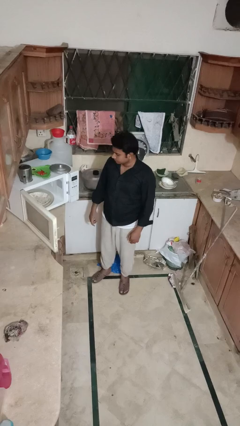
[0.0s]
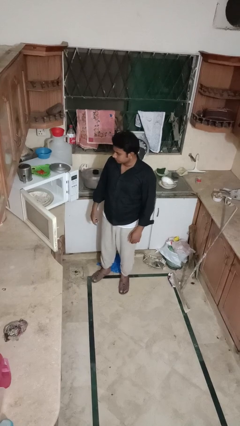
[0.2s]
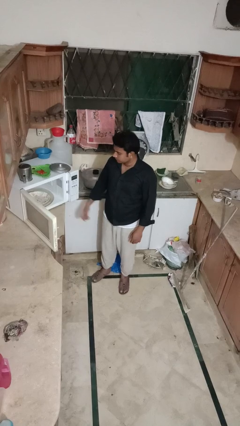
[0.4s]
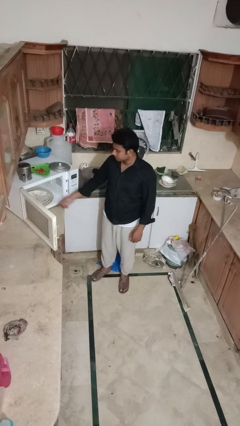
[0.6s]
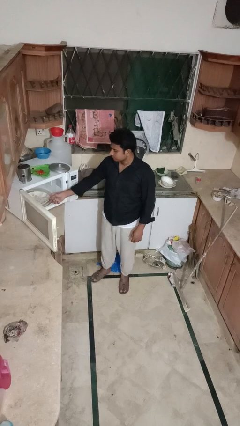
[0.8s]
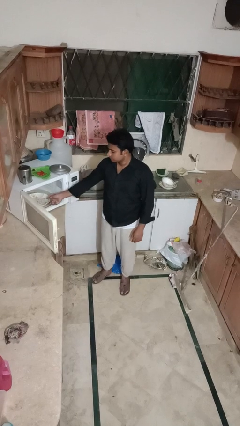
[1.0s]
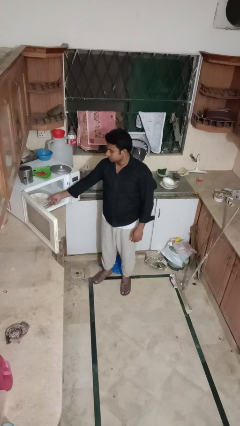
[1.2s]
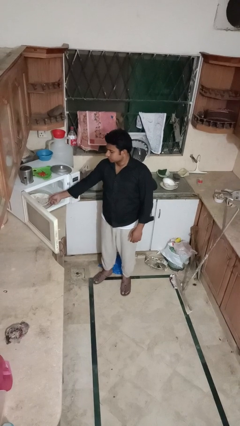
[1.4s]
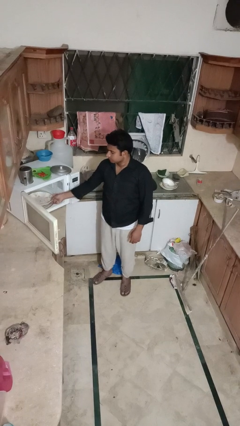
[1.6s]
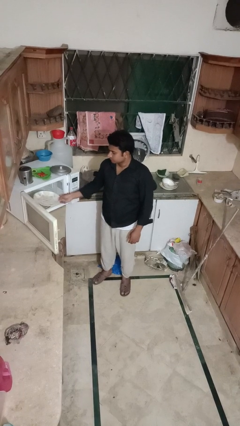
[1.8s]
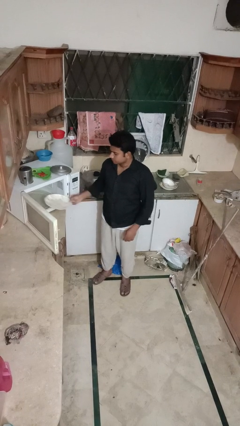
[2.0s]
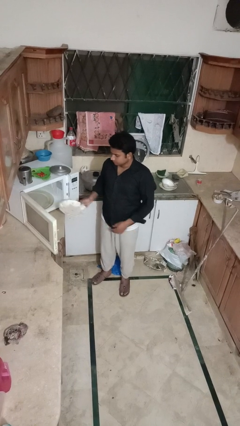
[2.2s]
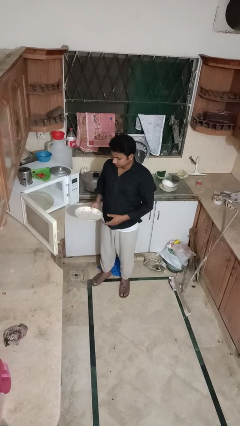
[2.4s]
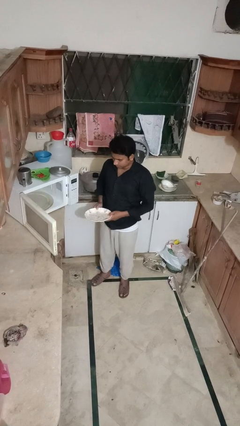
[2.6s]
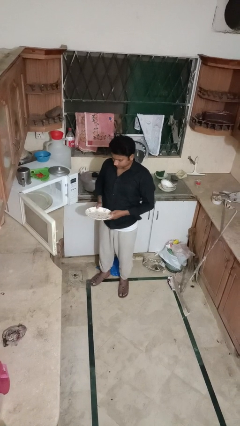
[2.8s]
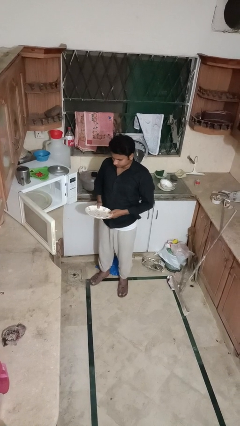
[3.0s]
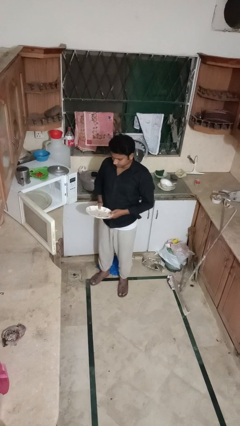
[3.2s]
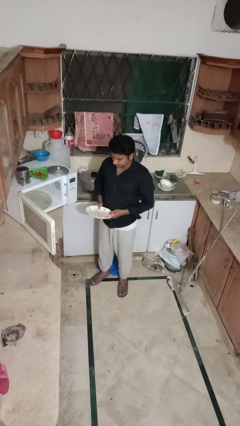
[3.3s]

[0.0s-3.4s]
person takes object from microwave

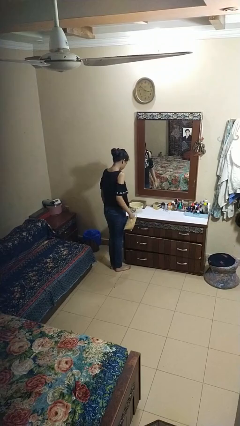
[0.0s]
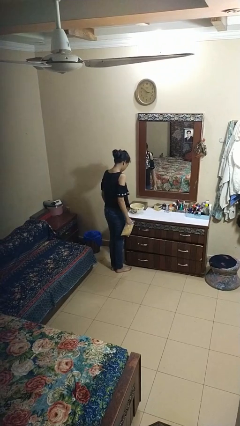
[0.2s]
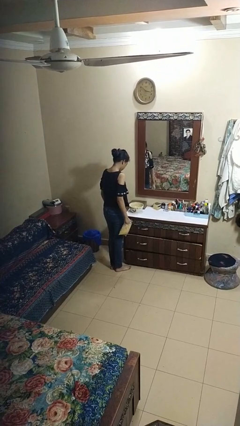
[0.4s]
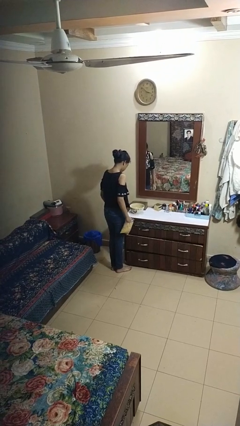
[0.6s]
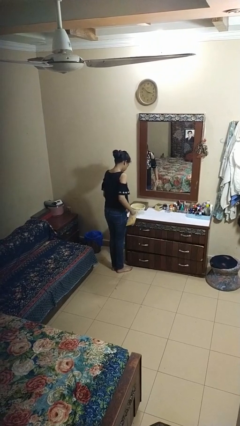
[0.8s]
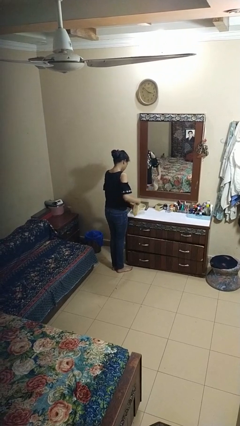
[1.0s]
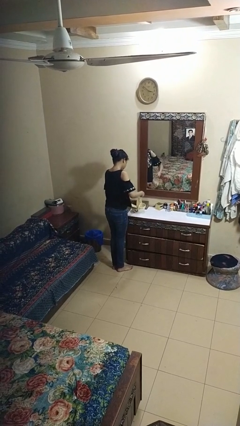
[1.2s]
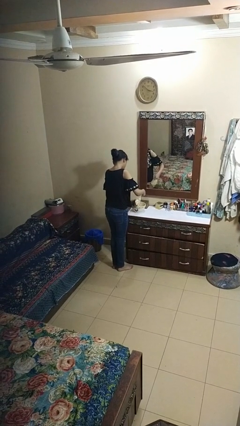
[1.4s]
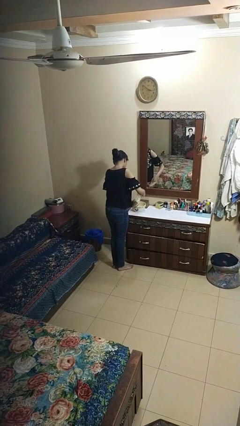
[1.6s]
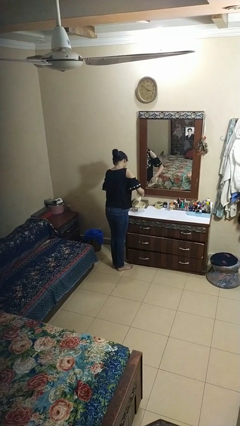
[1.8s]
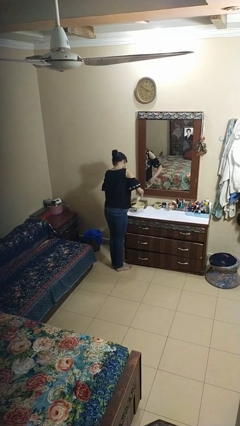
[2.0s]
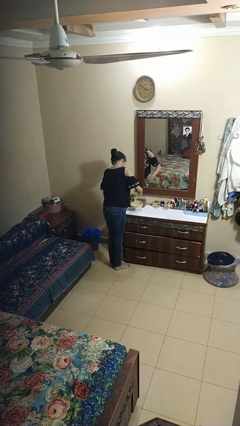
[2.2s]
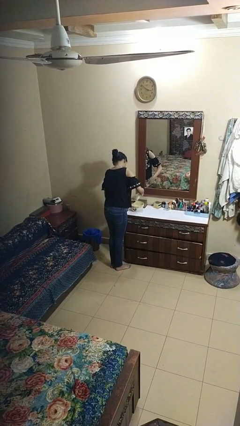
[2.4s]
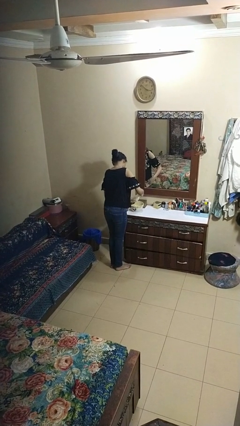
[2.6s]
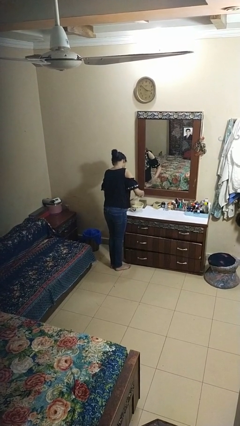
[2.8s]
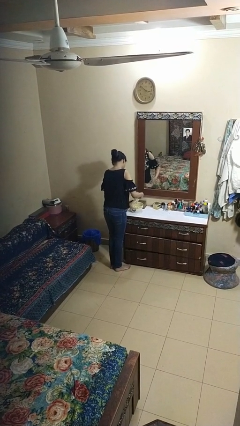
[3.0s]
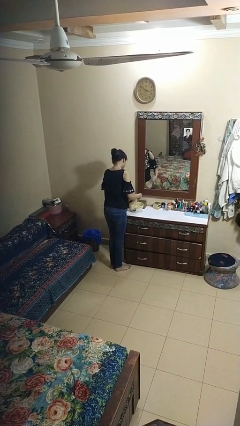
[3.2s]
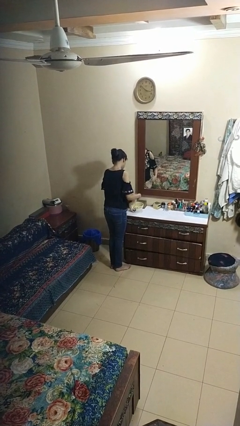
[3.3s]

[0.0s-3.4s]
person pours into bowl

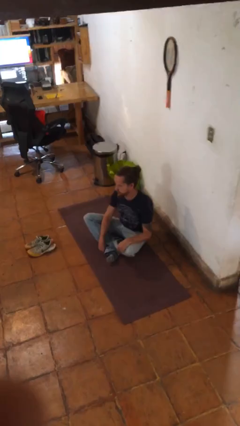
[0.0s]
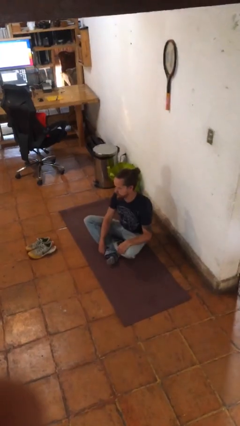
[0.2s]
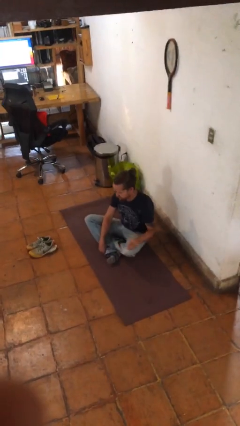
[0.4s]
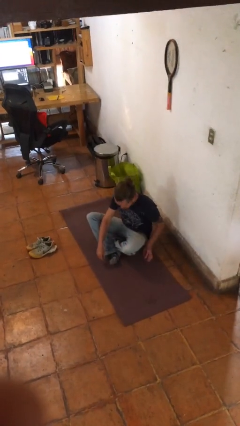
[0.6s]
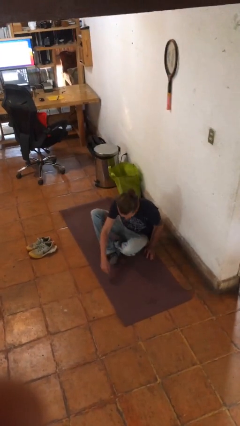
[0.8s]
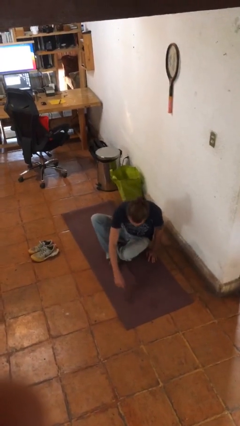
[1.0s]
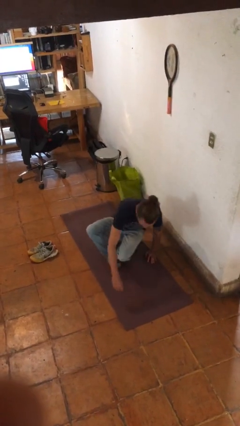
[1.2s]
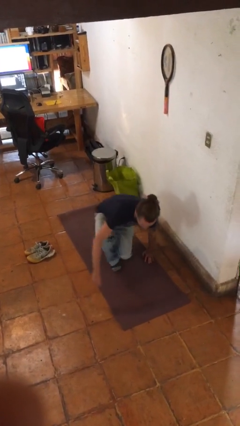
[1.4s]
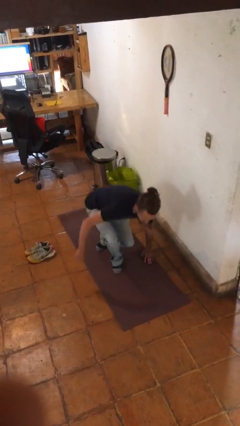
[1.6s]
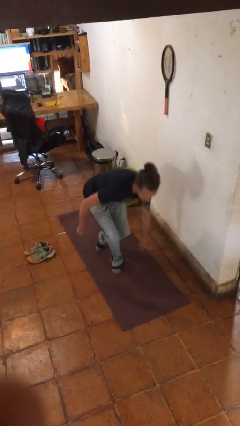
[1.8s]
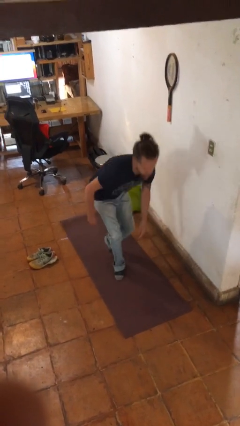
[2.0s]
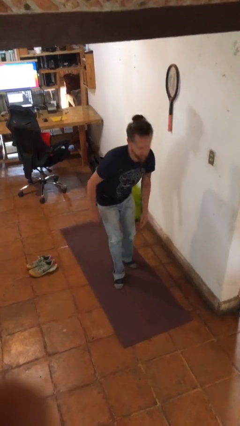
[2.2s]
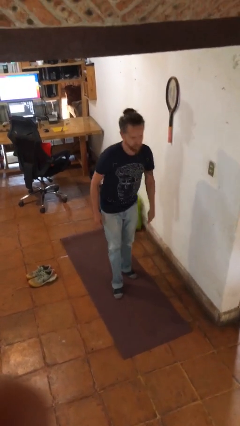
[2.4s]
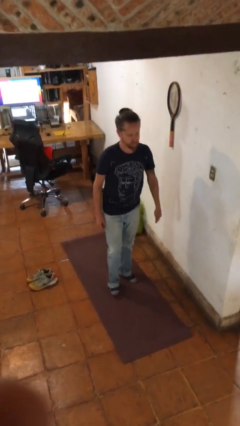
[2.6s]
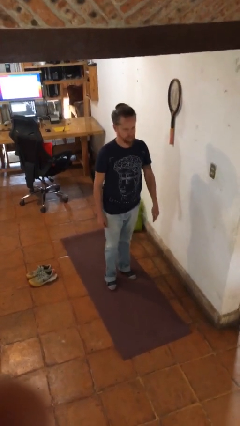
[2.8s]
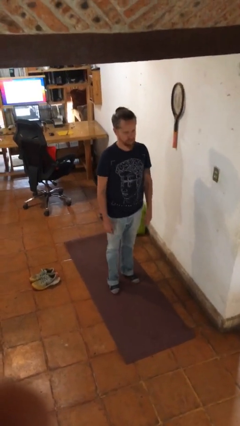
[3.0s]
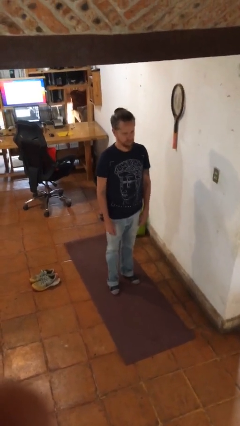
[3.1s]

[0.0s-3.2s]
person stands up from floor

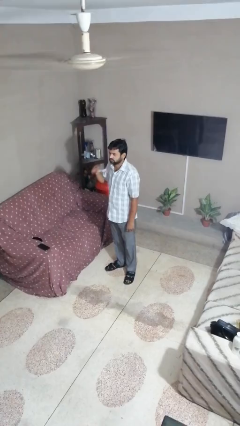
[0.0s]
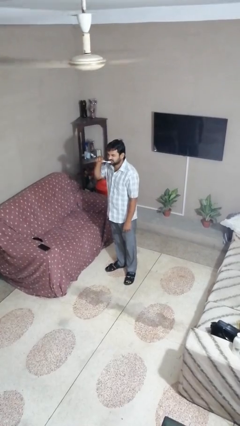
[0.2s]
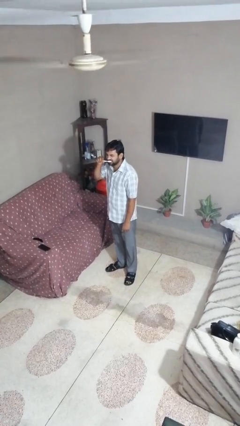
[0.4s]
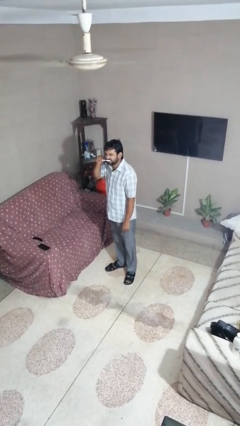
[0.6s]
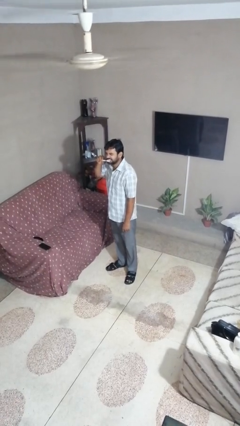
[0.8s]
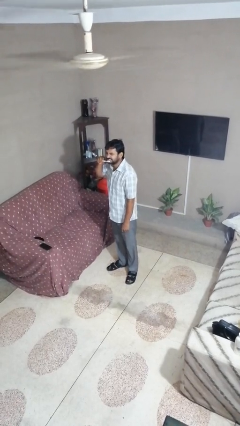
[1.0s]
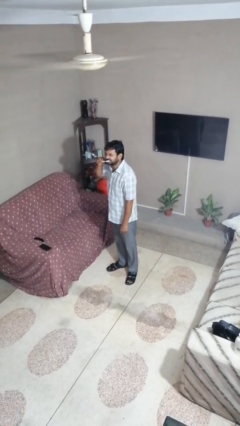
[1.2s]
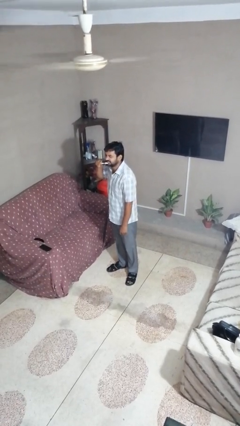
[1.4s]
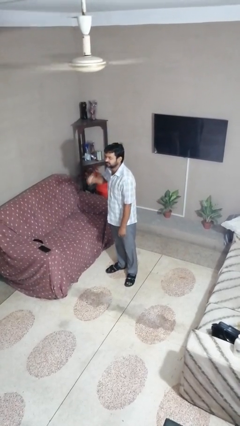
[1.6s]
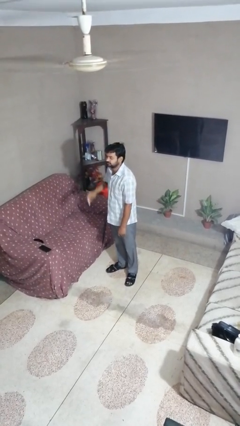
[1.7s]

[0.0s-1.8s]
person brushes teeth

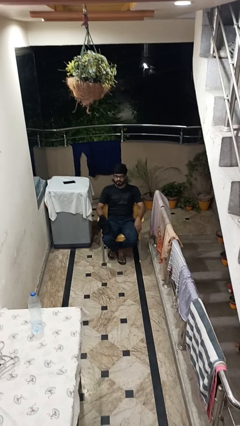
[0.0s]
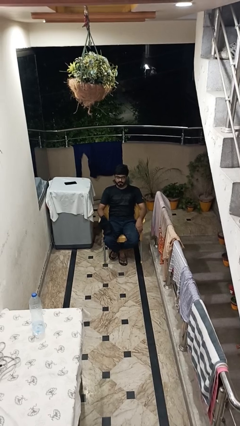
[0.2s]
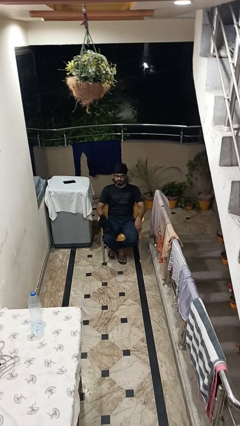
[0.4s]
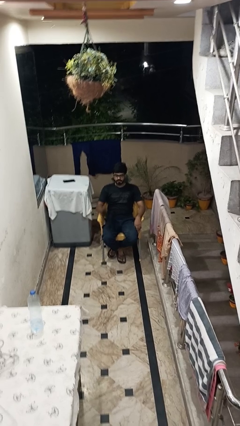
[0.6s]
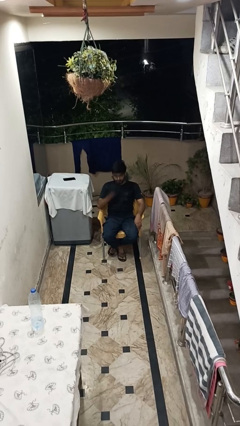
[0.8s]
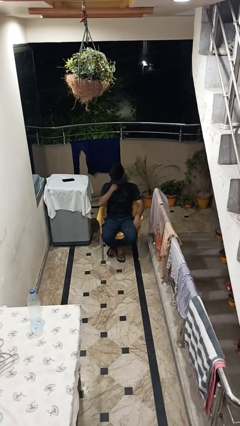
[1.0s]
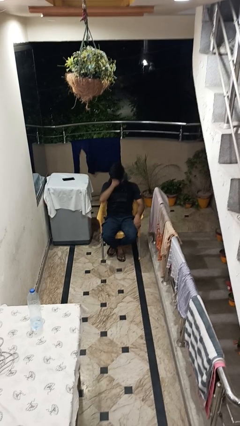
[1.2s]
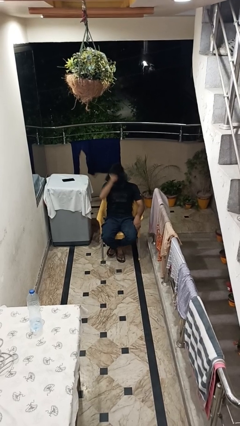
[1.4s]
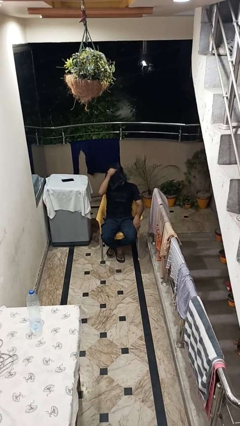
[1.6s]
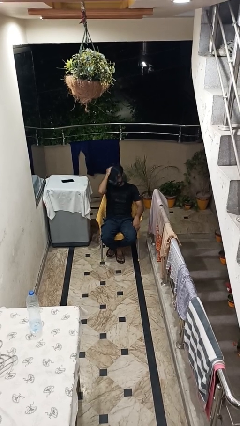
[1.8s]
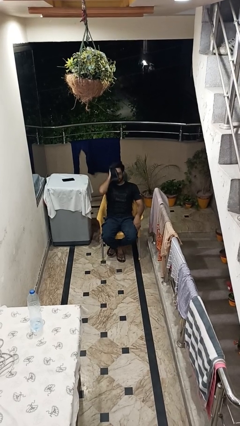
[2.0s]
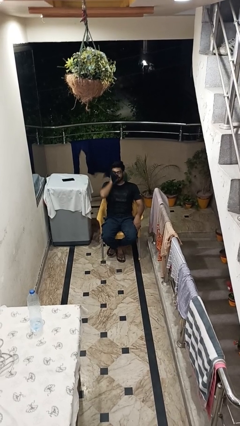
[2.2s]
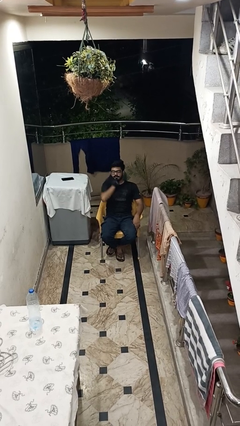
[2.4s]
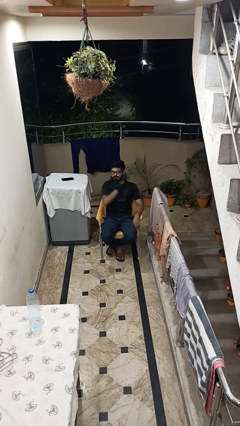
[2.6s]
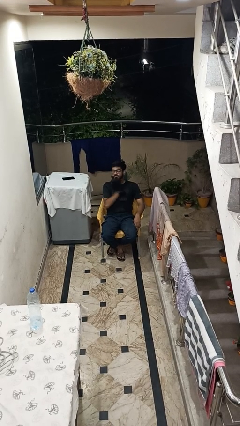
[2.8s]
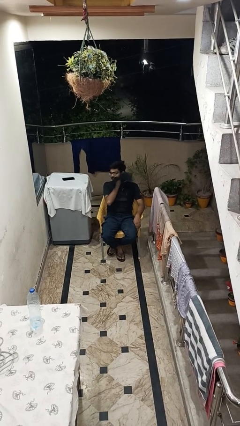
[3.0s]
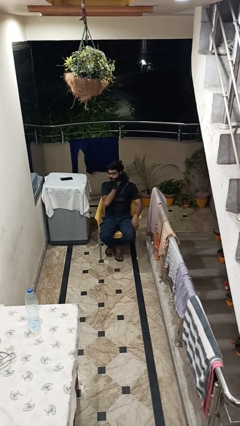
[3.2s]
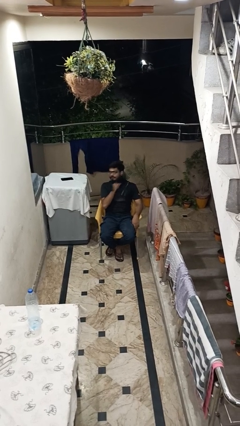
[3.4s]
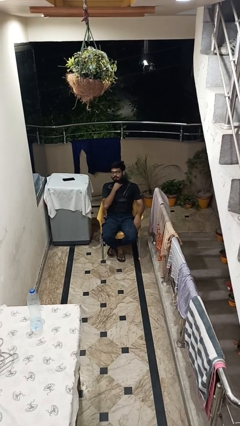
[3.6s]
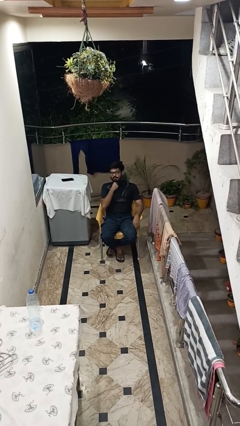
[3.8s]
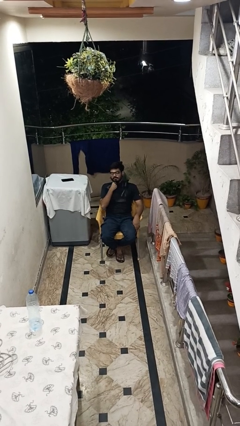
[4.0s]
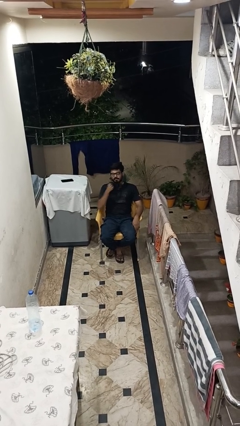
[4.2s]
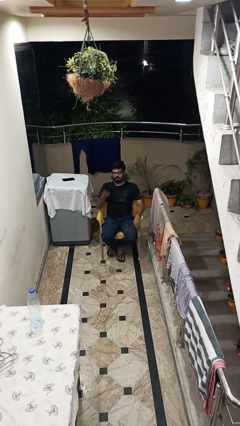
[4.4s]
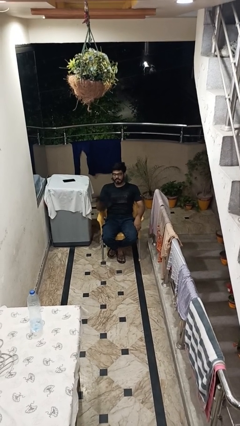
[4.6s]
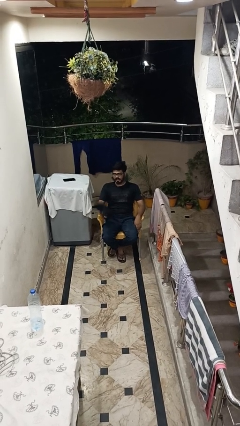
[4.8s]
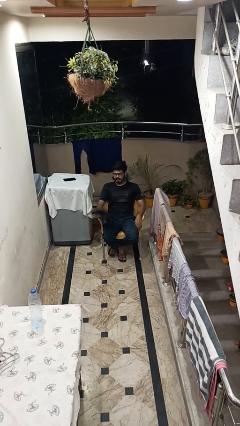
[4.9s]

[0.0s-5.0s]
person wipes mouth with napkin

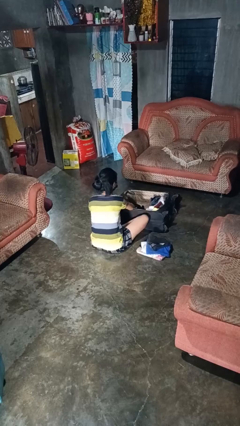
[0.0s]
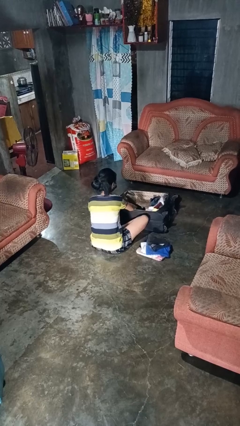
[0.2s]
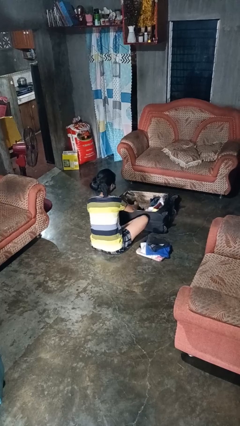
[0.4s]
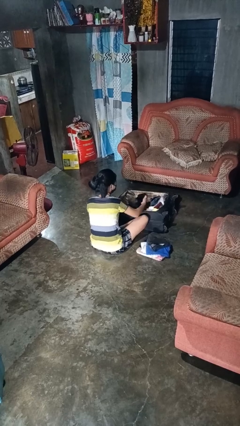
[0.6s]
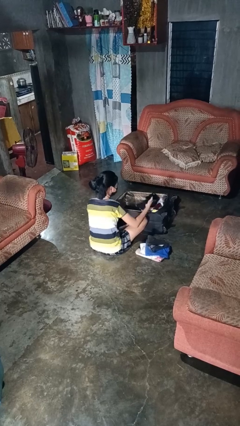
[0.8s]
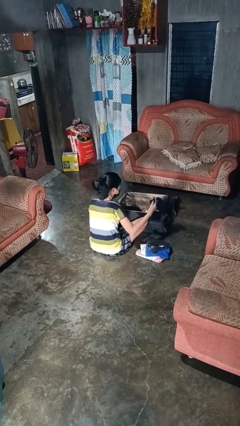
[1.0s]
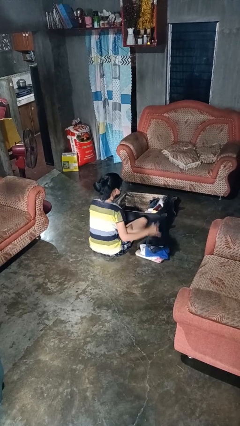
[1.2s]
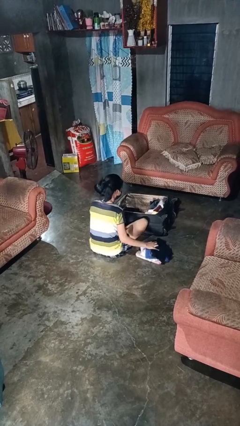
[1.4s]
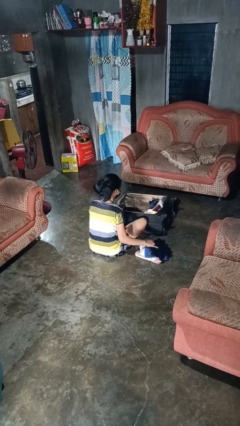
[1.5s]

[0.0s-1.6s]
person unloads clothes from suitcase
